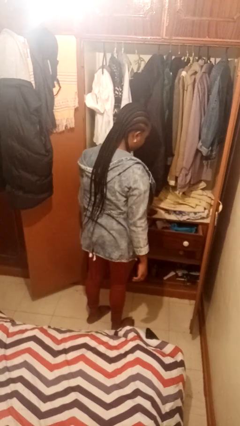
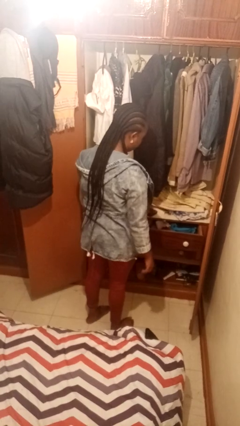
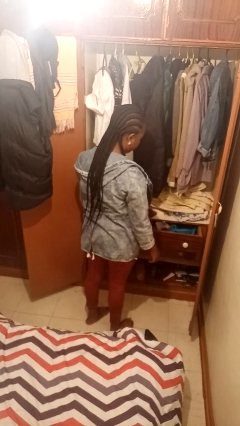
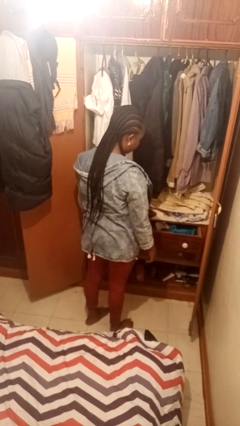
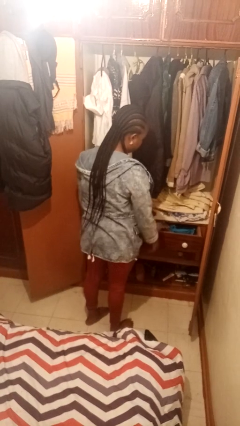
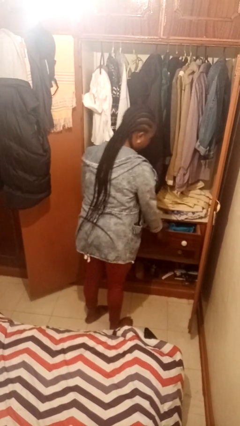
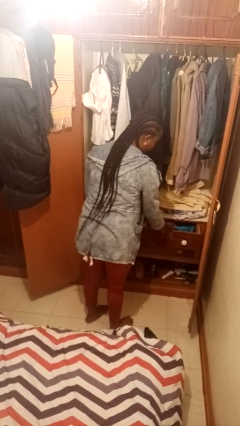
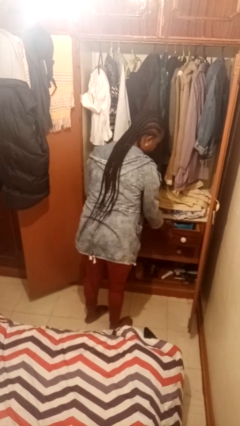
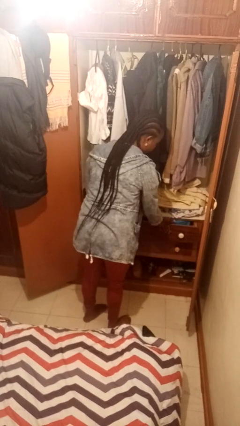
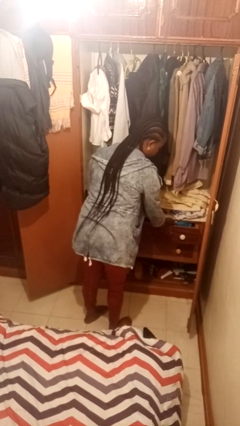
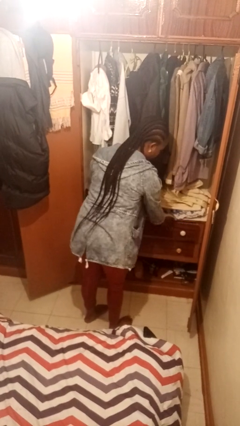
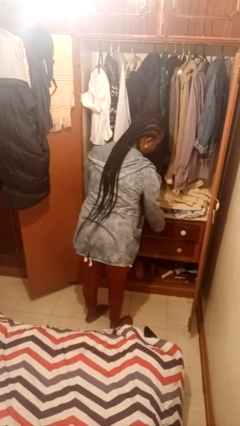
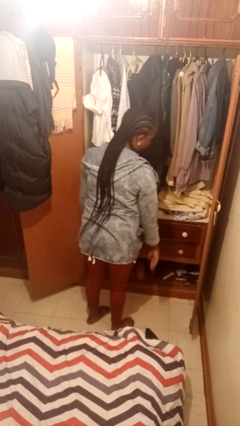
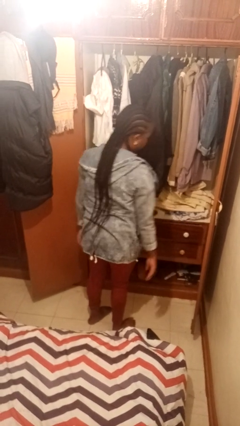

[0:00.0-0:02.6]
person closes dresser drawer

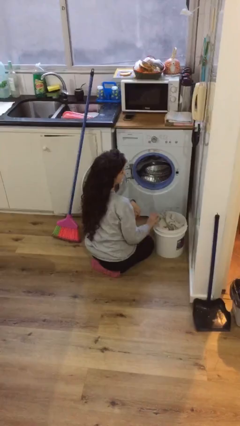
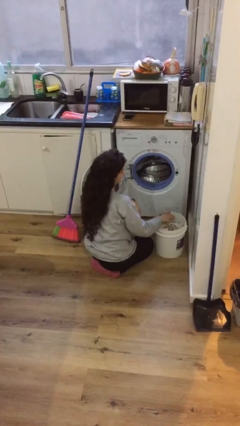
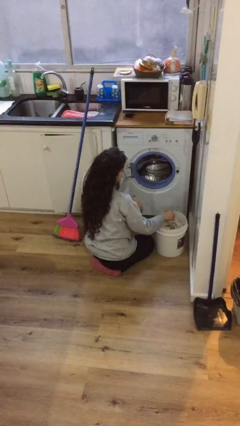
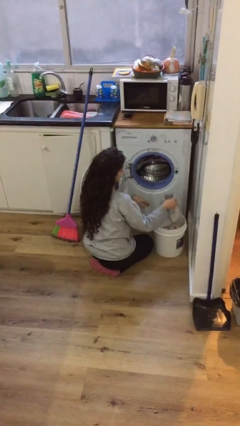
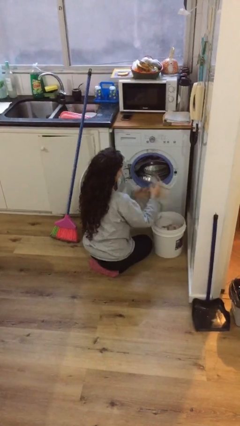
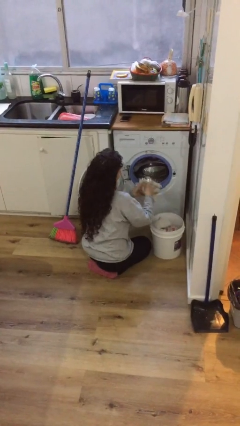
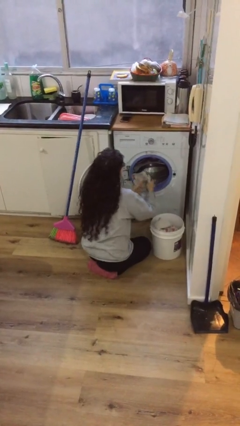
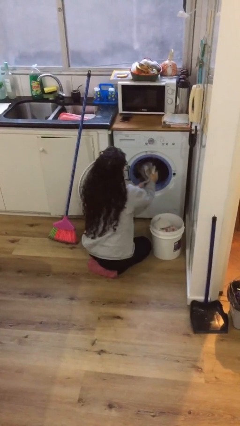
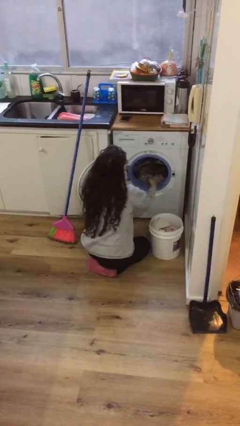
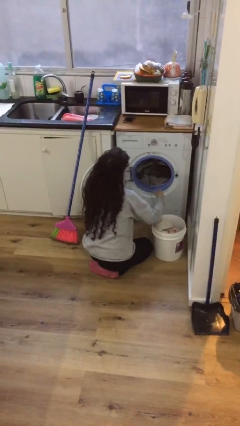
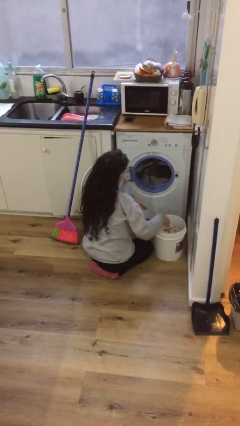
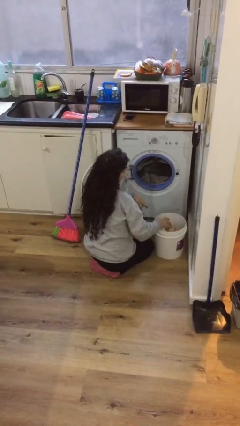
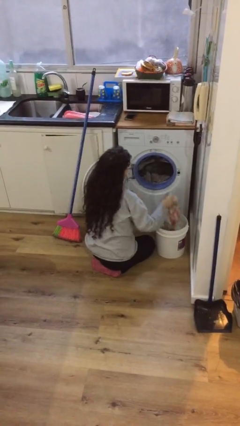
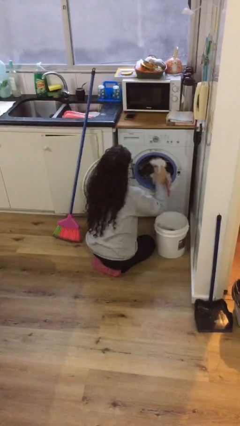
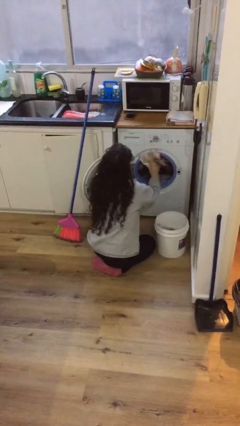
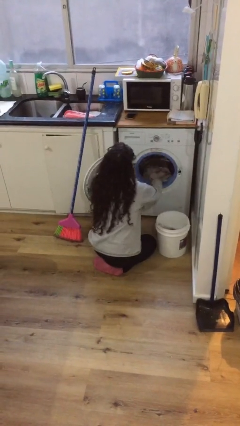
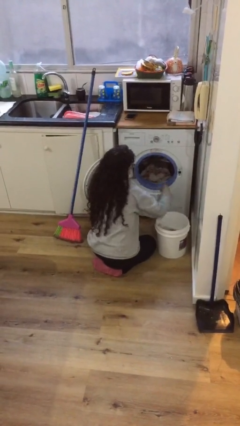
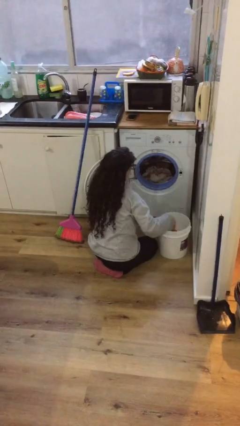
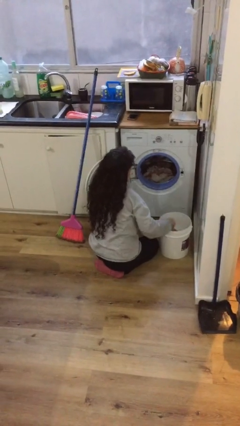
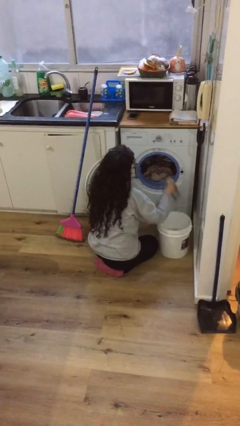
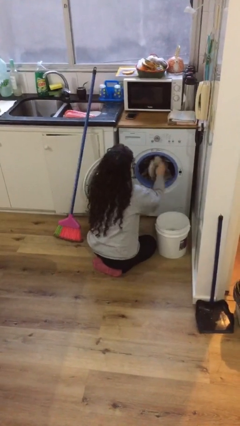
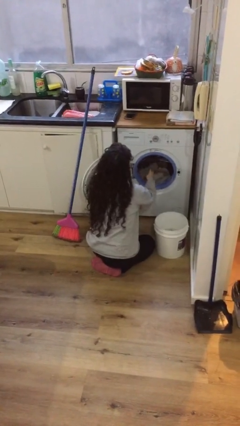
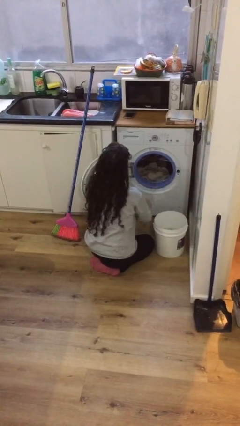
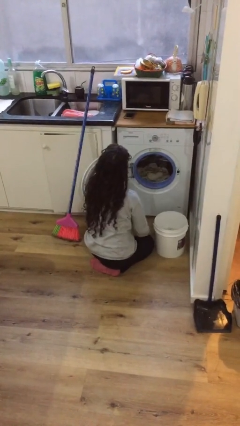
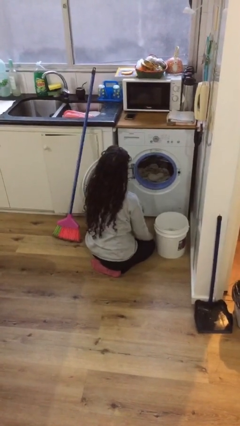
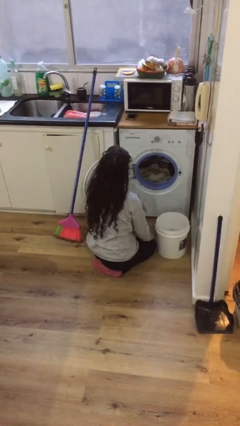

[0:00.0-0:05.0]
person loads clotheswasher

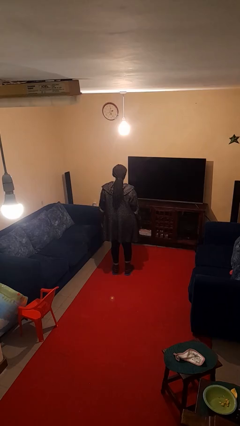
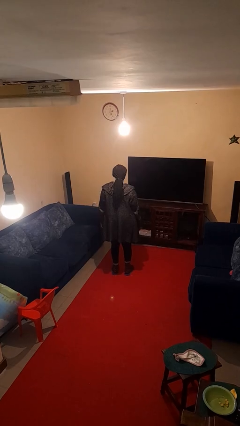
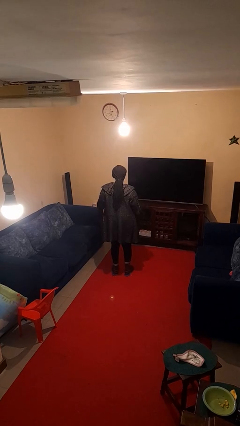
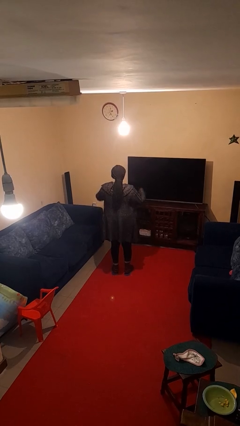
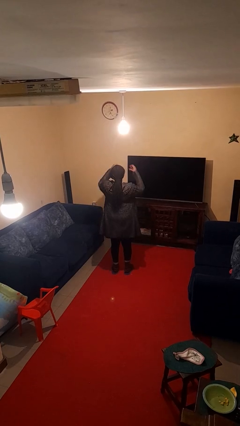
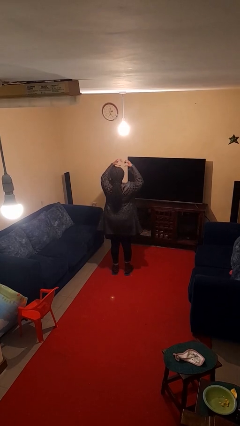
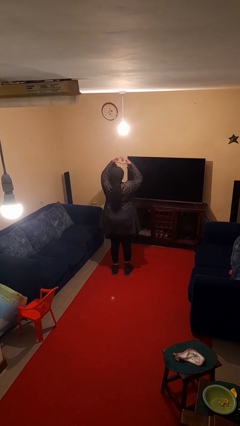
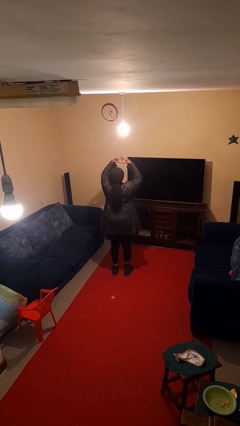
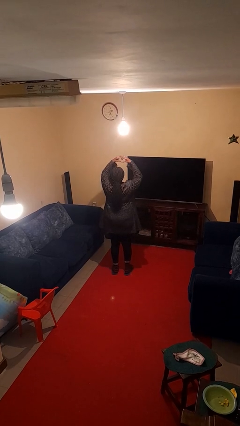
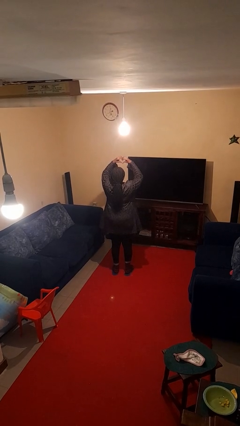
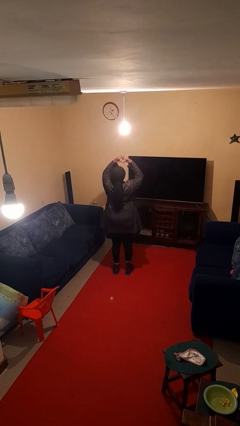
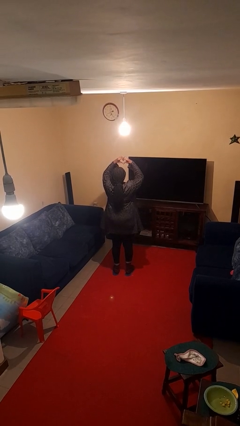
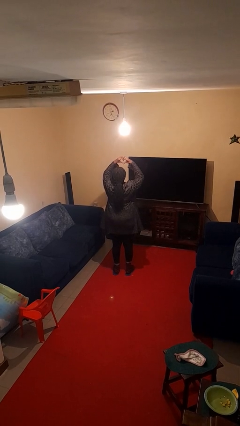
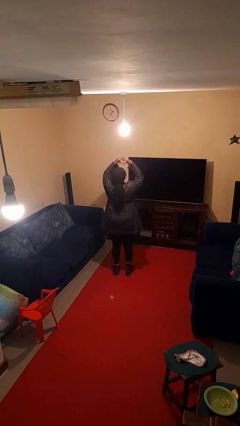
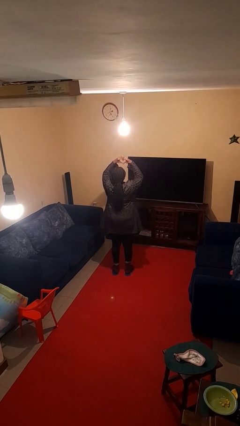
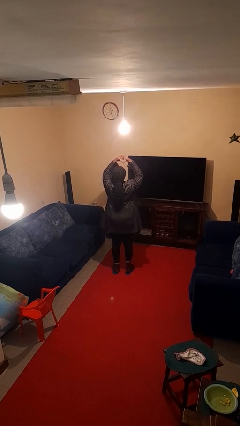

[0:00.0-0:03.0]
person gestures heart

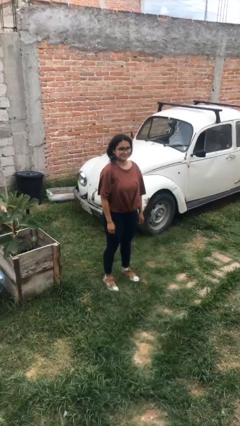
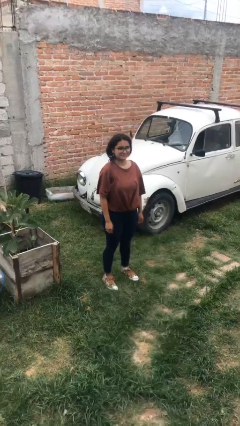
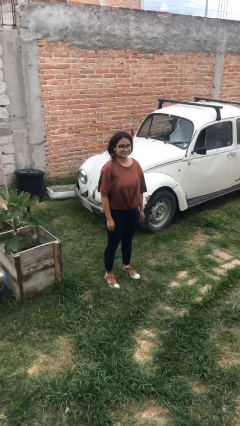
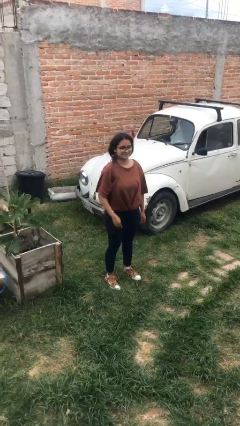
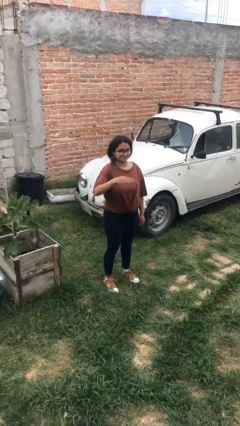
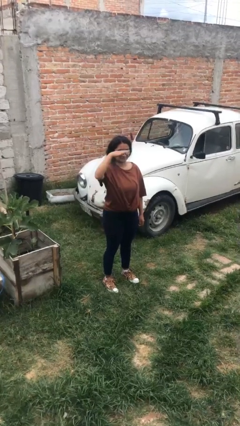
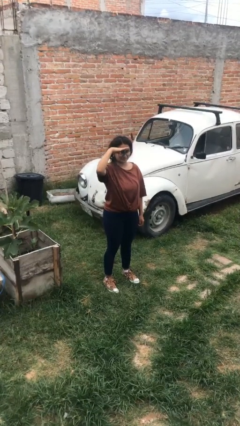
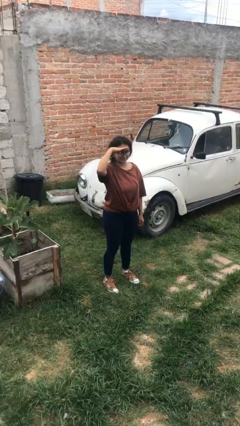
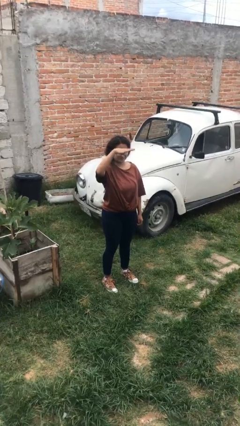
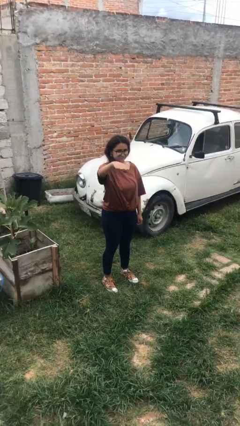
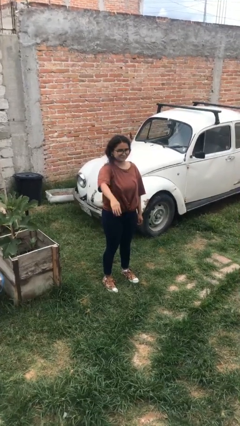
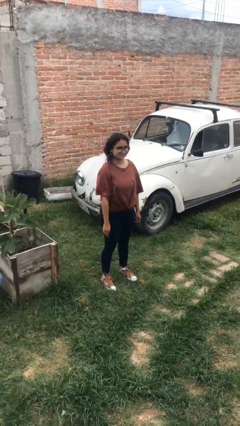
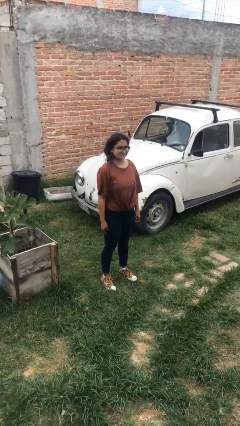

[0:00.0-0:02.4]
person salutes

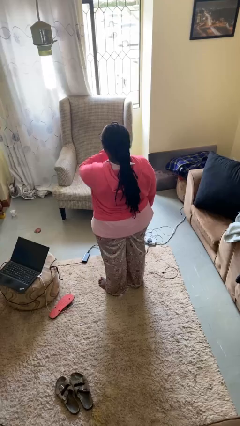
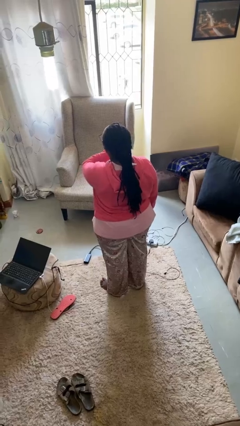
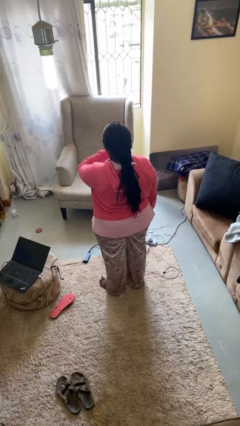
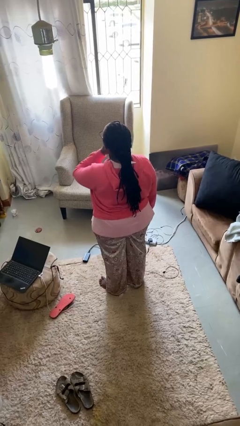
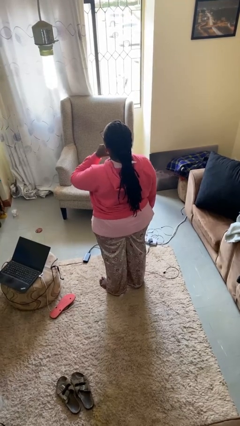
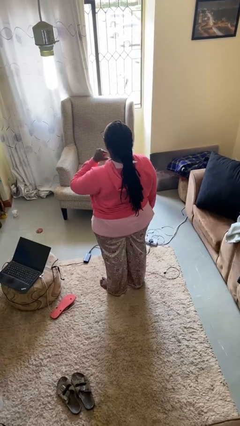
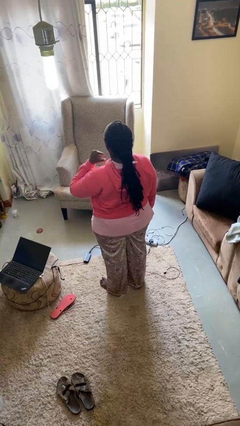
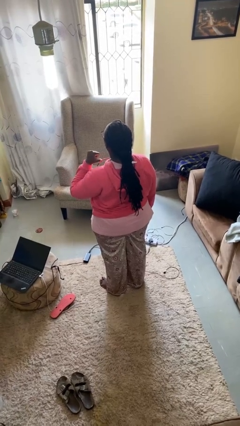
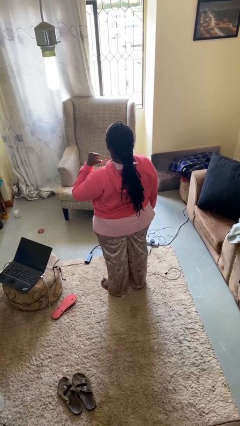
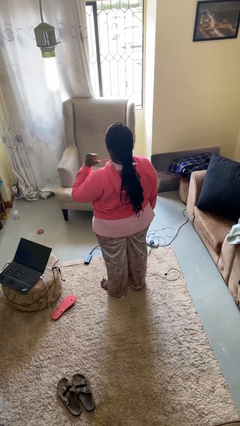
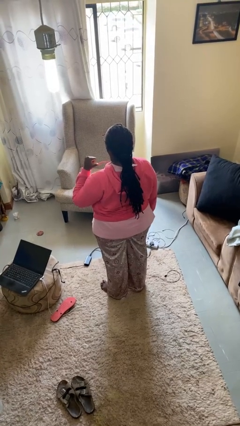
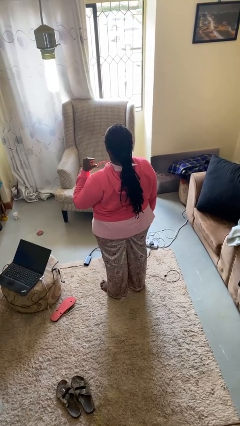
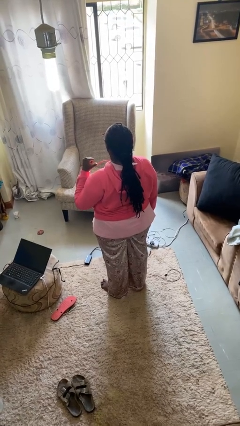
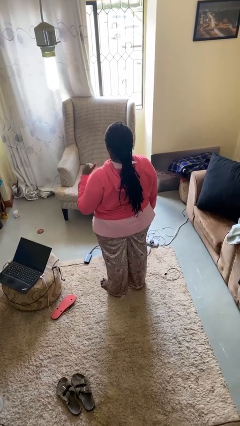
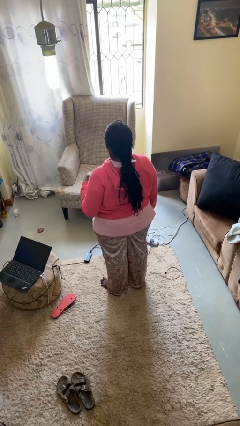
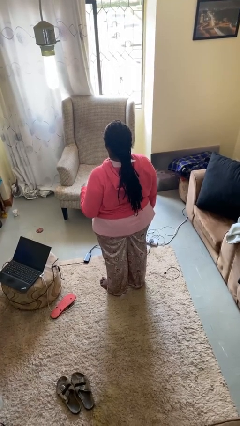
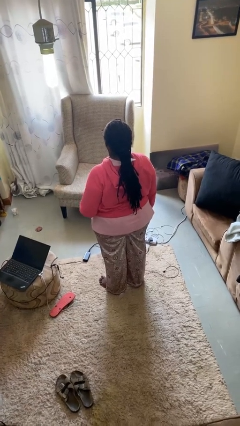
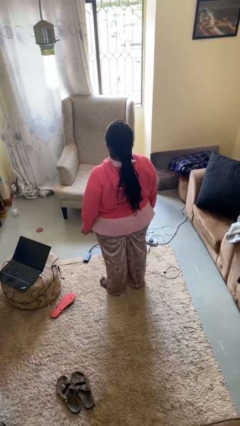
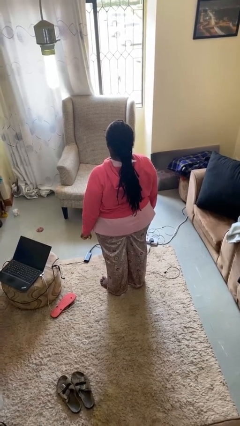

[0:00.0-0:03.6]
person gestures cut

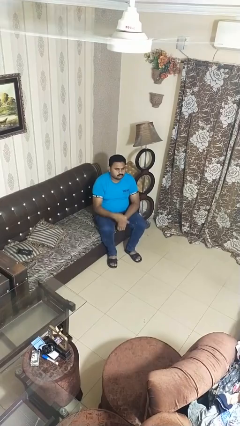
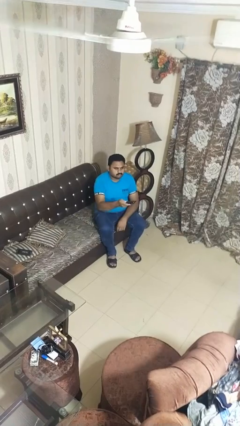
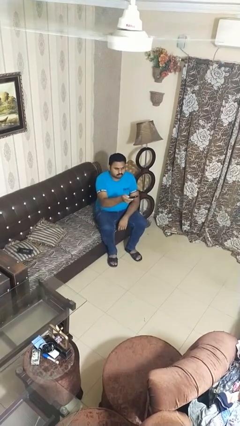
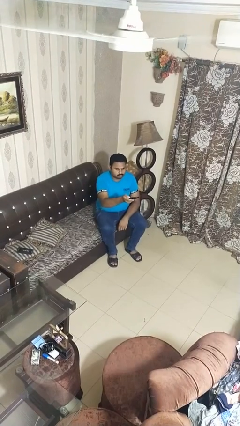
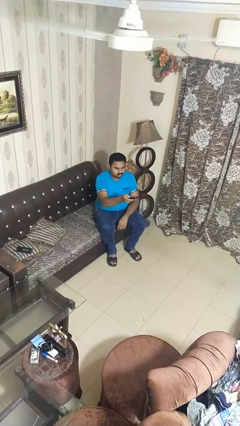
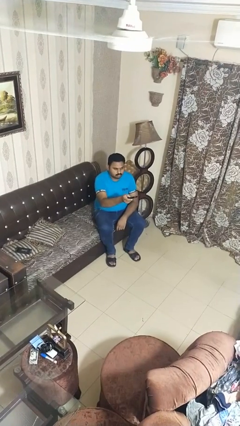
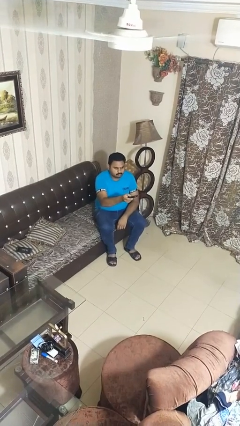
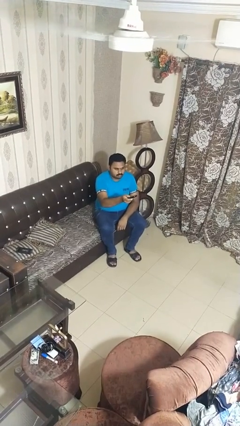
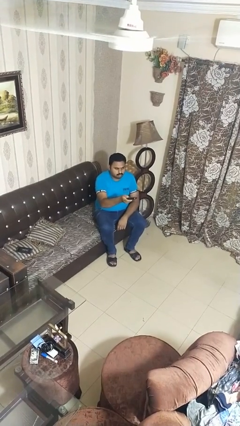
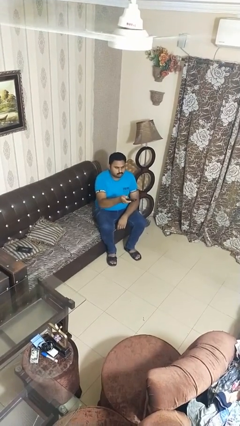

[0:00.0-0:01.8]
person uses television remote
